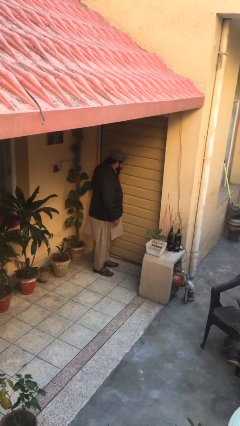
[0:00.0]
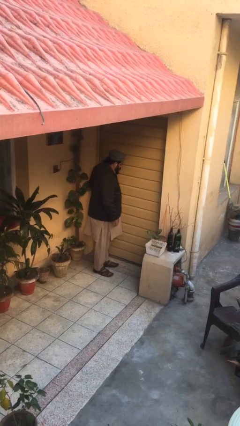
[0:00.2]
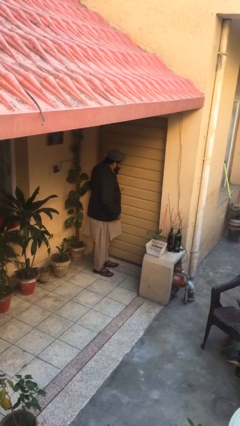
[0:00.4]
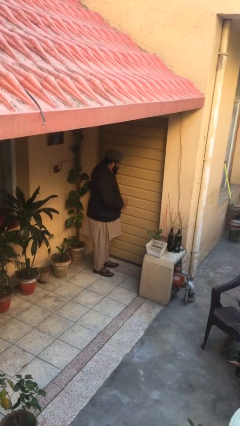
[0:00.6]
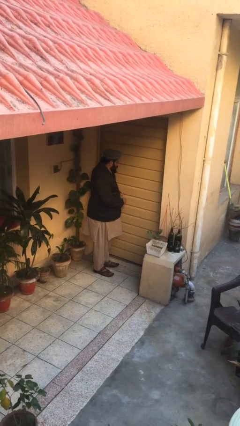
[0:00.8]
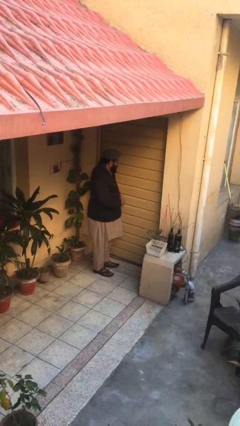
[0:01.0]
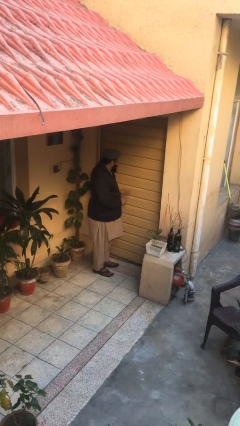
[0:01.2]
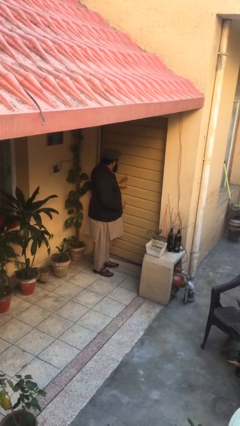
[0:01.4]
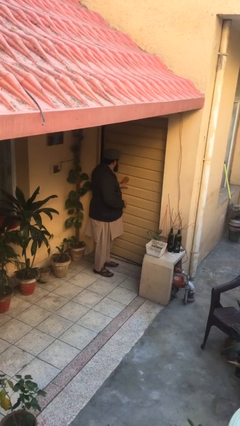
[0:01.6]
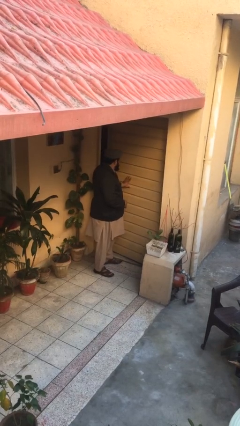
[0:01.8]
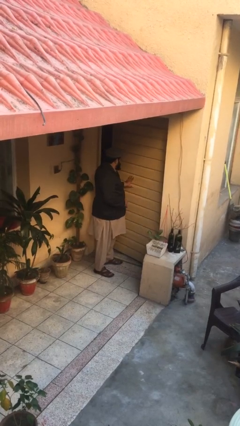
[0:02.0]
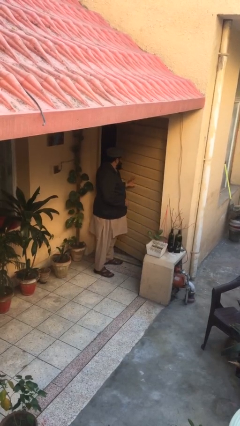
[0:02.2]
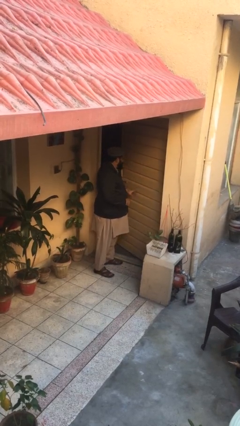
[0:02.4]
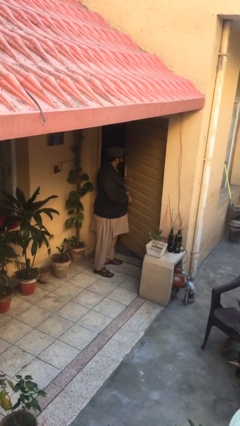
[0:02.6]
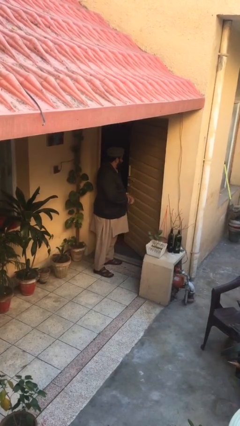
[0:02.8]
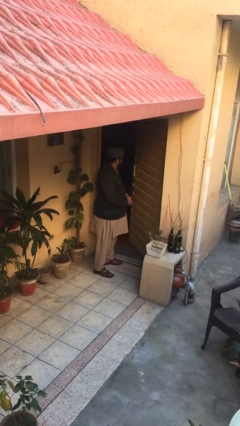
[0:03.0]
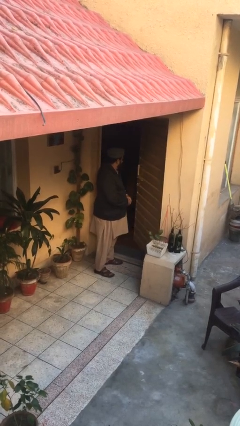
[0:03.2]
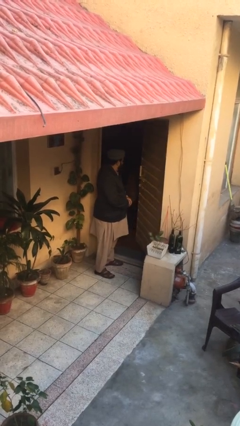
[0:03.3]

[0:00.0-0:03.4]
person opens facility door

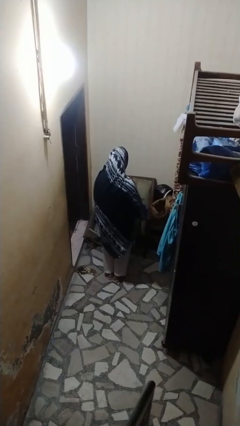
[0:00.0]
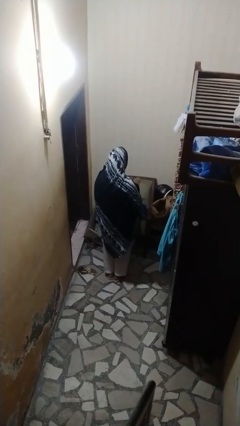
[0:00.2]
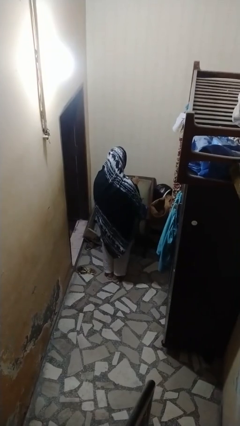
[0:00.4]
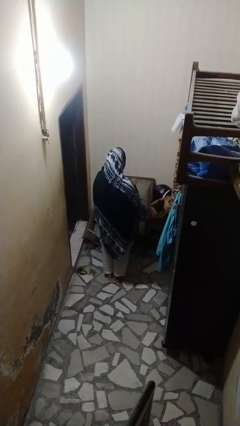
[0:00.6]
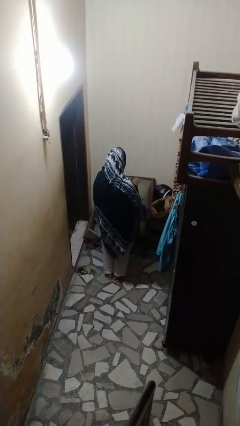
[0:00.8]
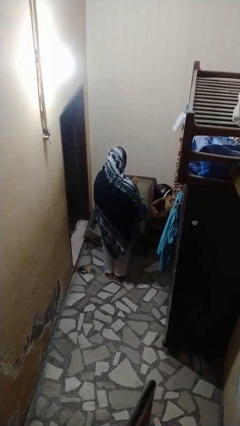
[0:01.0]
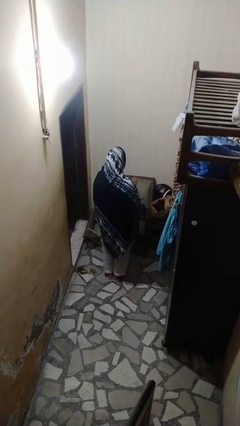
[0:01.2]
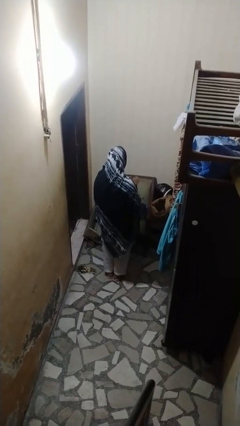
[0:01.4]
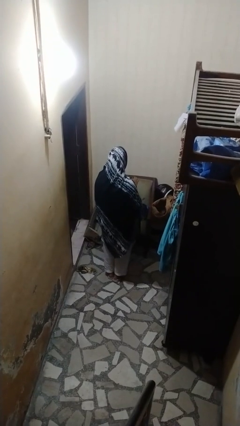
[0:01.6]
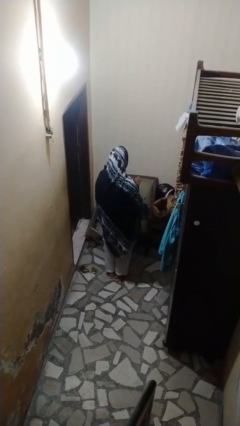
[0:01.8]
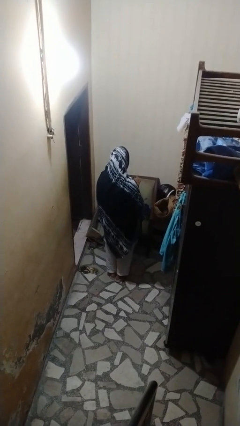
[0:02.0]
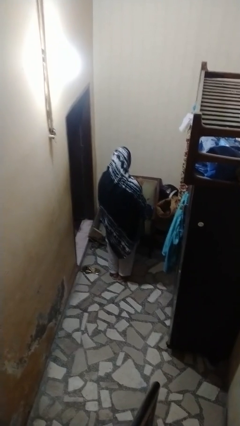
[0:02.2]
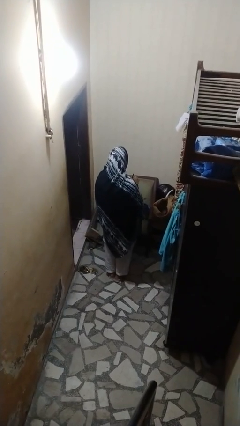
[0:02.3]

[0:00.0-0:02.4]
person stirs mug

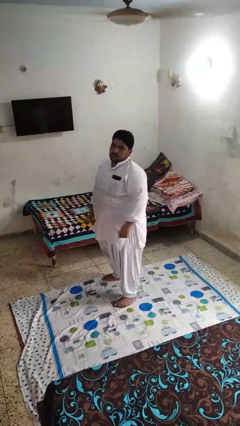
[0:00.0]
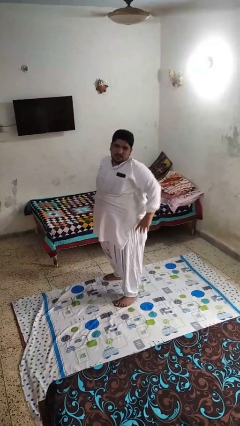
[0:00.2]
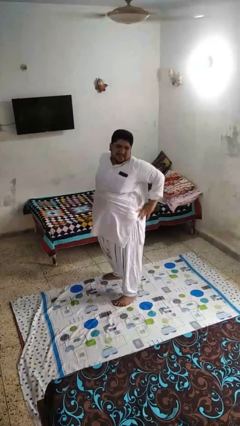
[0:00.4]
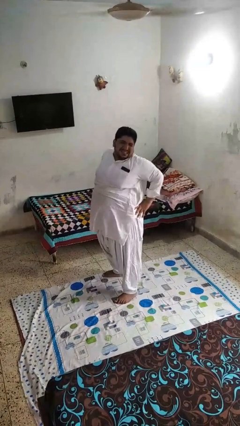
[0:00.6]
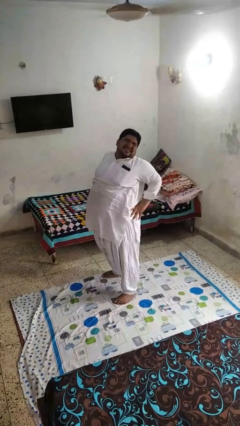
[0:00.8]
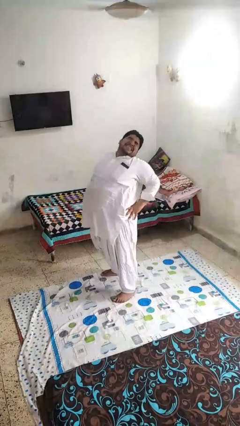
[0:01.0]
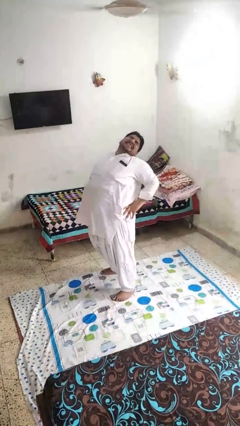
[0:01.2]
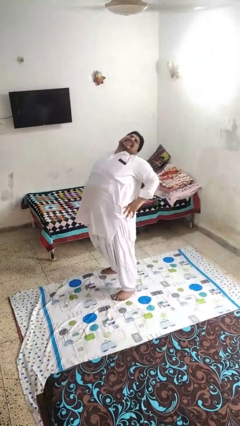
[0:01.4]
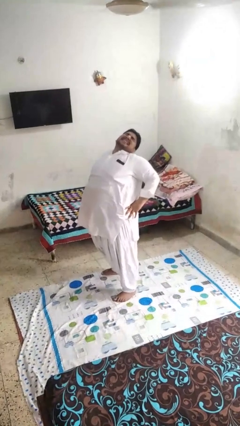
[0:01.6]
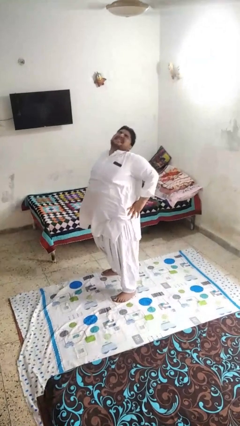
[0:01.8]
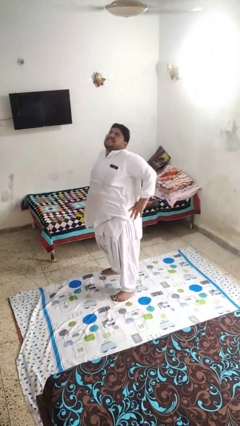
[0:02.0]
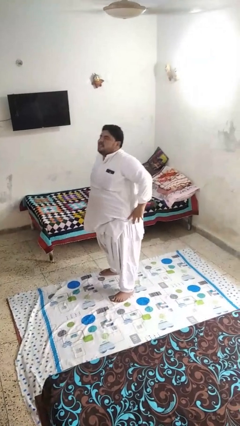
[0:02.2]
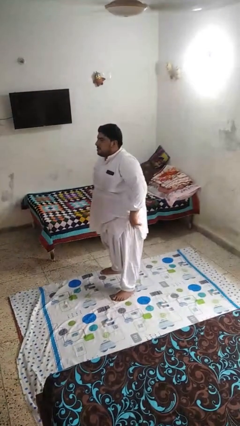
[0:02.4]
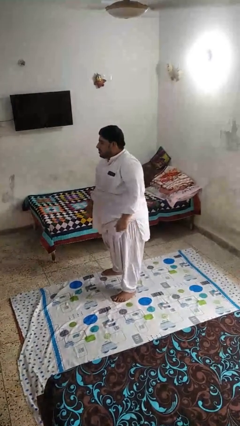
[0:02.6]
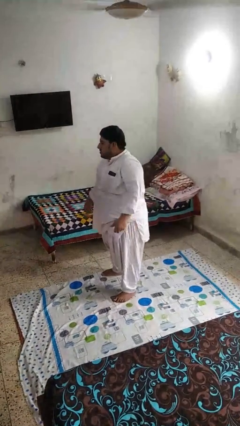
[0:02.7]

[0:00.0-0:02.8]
person stretches back

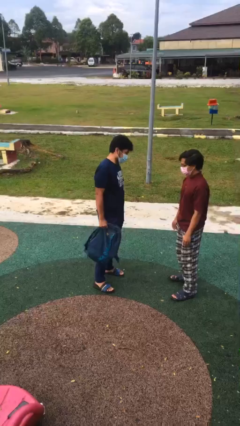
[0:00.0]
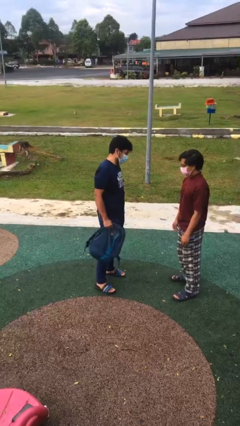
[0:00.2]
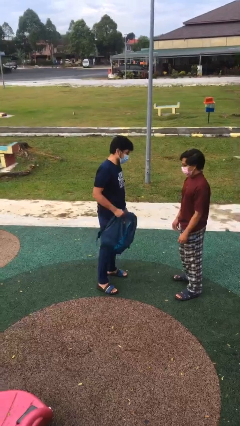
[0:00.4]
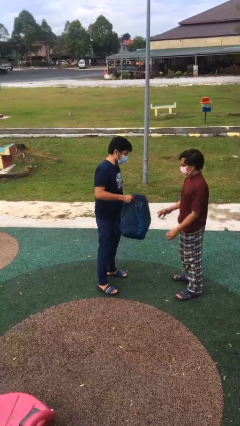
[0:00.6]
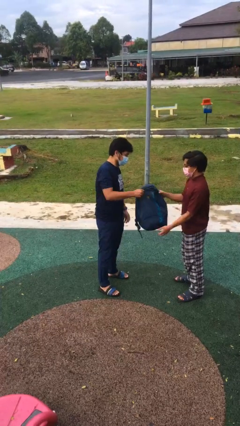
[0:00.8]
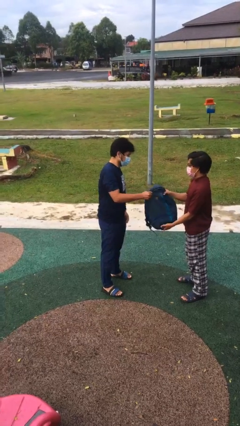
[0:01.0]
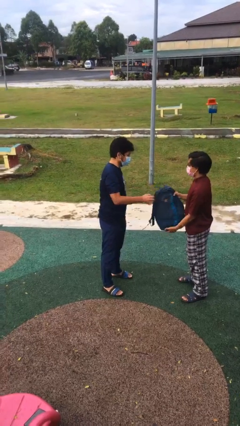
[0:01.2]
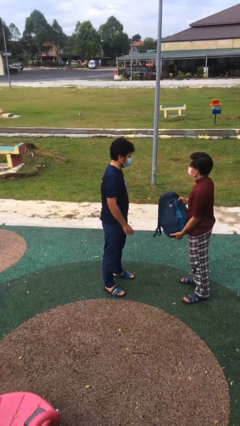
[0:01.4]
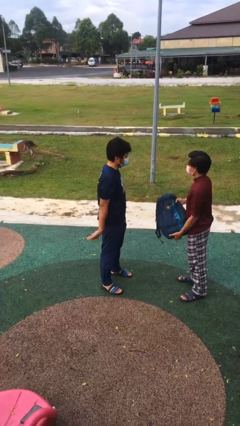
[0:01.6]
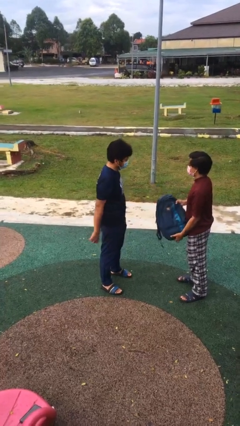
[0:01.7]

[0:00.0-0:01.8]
person transfers object to person

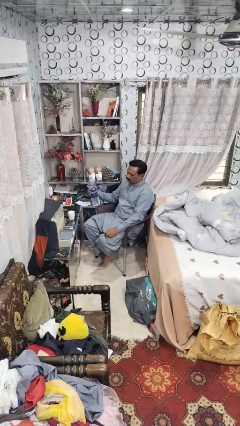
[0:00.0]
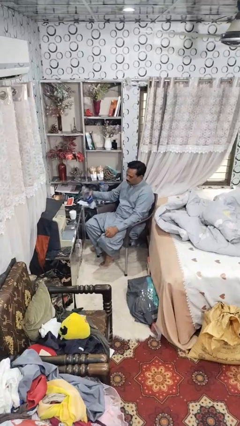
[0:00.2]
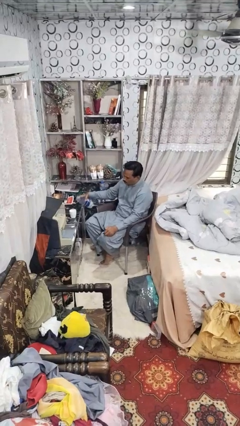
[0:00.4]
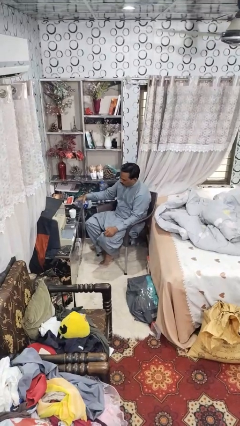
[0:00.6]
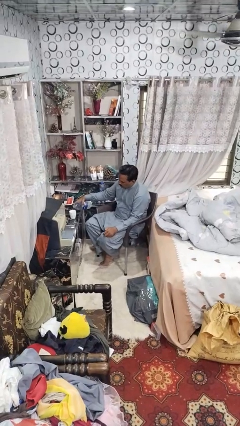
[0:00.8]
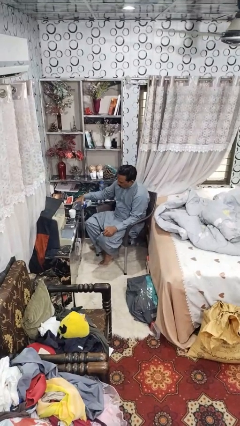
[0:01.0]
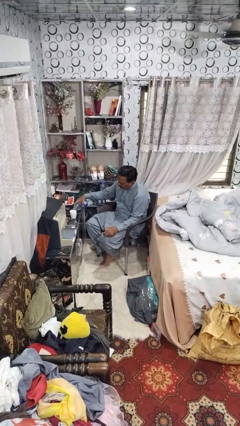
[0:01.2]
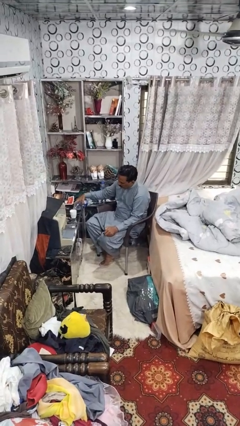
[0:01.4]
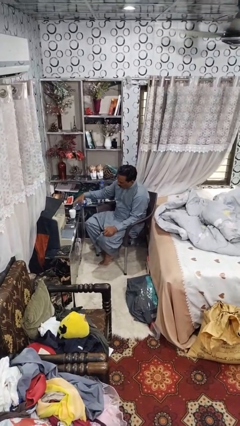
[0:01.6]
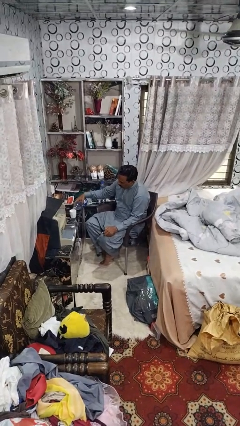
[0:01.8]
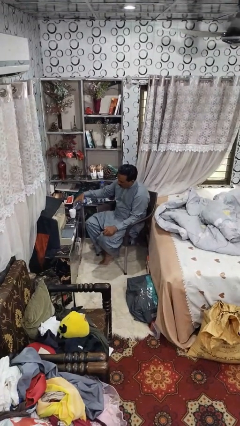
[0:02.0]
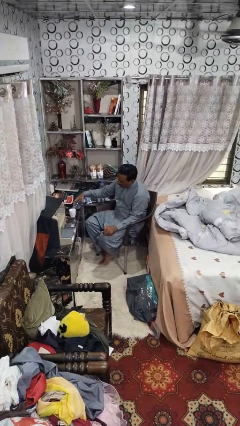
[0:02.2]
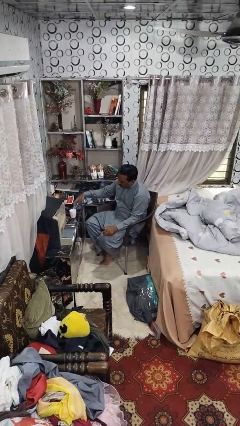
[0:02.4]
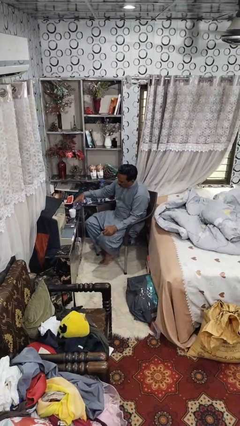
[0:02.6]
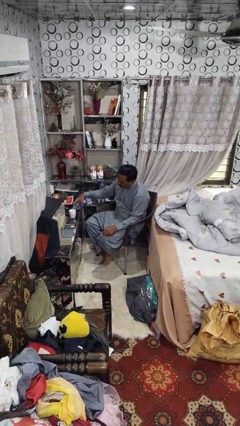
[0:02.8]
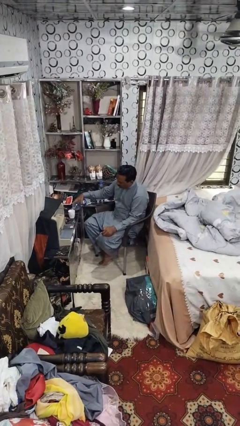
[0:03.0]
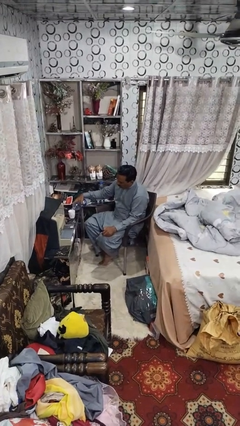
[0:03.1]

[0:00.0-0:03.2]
person pours liquid into cup

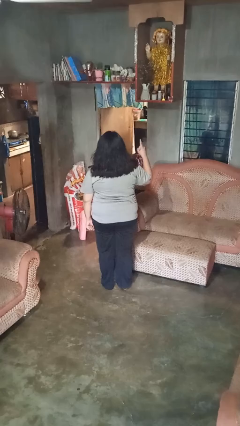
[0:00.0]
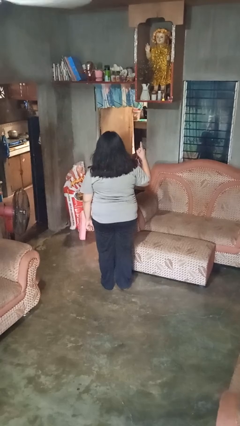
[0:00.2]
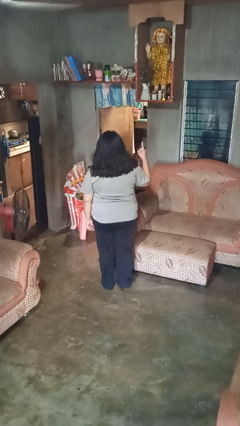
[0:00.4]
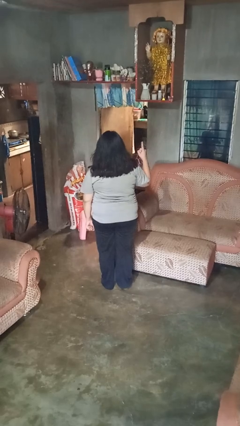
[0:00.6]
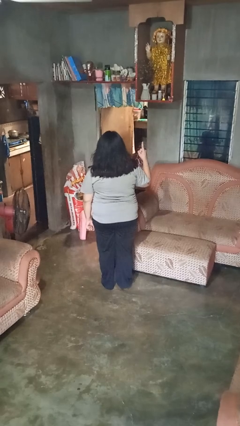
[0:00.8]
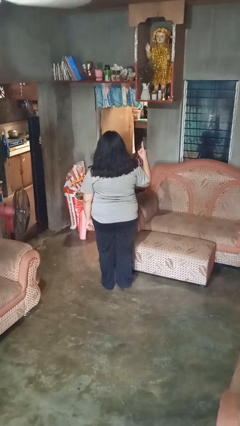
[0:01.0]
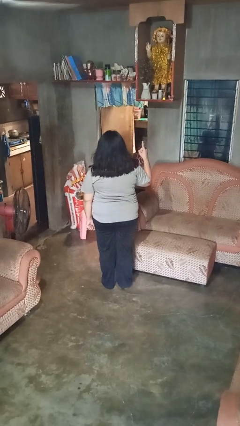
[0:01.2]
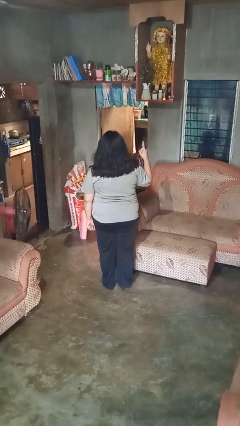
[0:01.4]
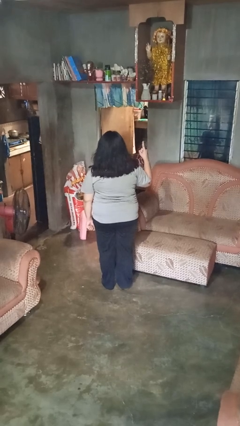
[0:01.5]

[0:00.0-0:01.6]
person gestures number one

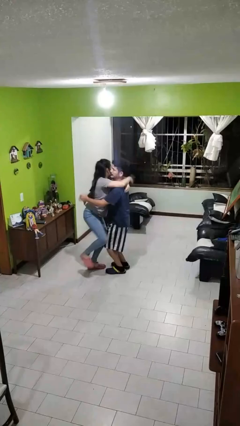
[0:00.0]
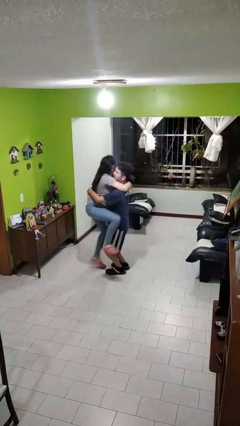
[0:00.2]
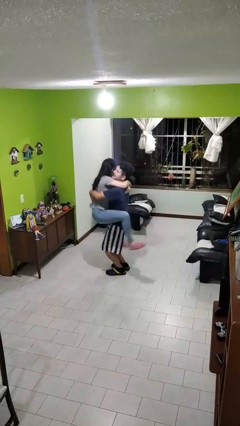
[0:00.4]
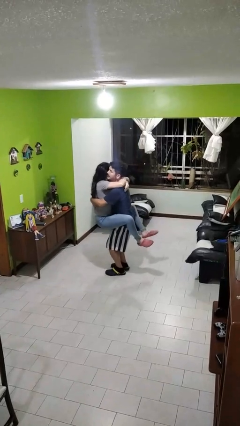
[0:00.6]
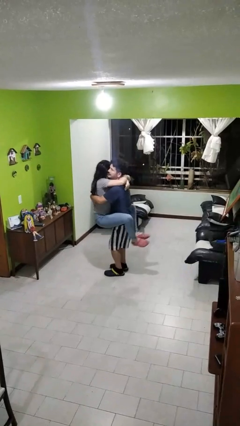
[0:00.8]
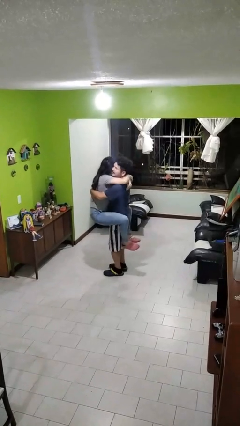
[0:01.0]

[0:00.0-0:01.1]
person picks up person

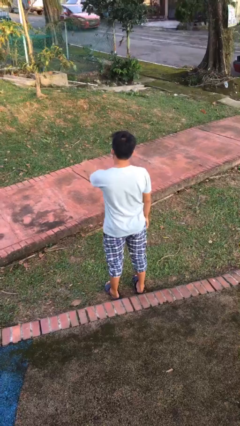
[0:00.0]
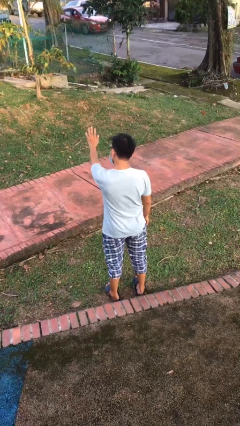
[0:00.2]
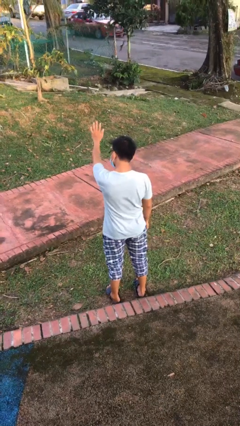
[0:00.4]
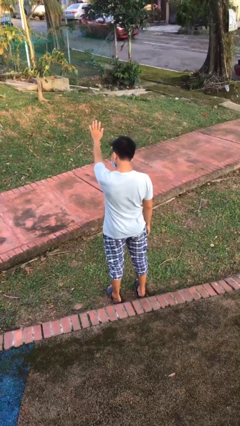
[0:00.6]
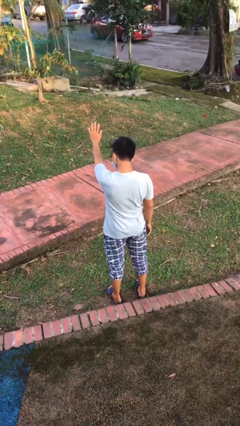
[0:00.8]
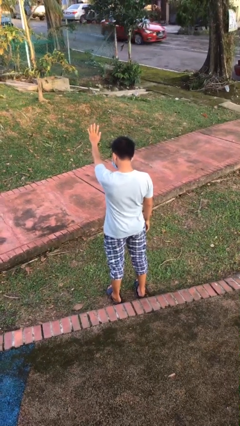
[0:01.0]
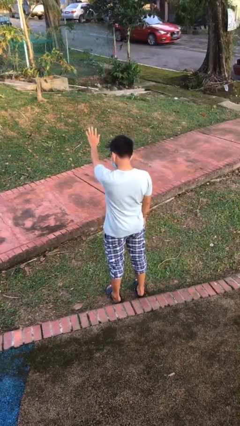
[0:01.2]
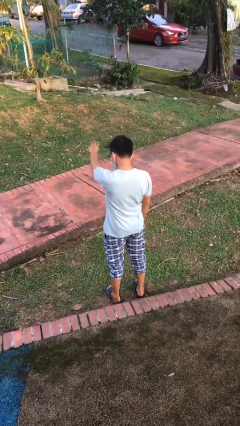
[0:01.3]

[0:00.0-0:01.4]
person gestures stop
